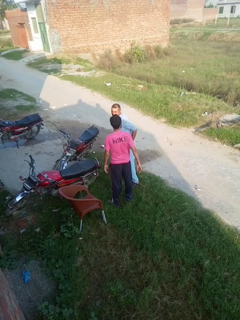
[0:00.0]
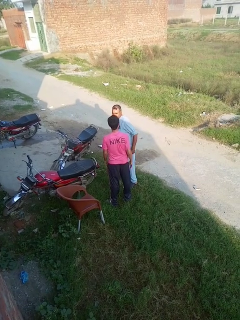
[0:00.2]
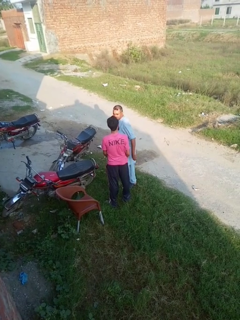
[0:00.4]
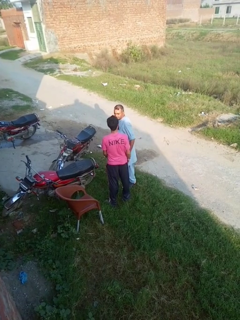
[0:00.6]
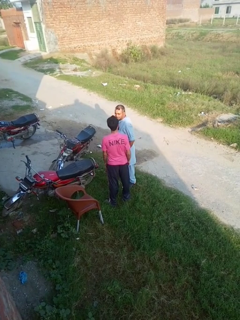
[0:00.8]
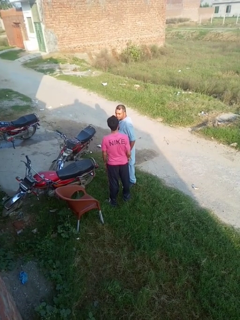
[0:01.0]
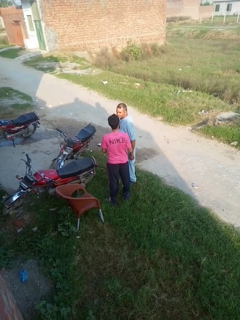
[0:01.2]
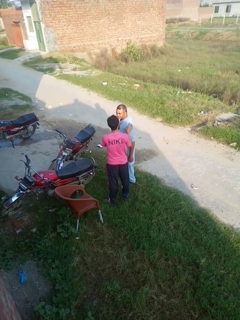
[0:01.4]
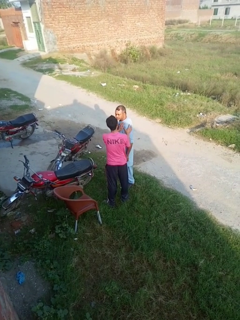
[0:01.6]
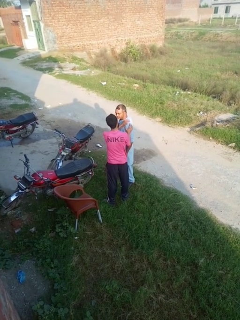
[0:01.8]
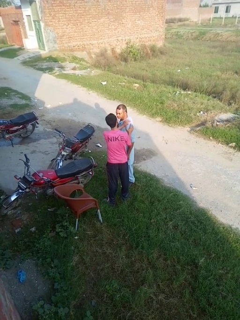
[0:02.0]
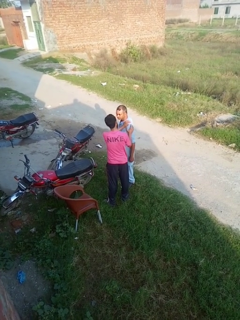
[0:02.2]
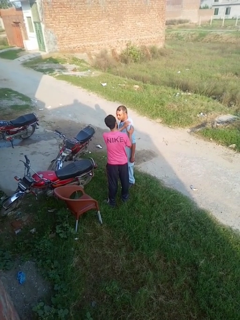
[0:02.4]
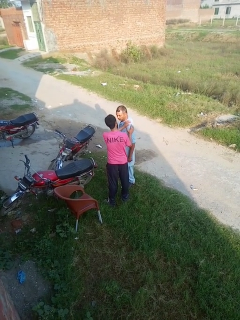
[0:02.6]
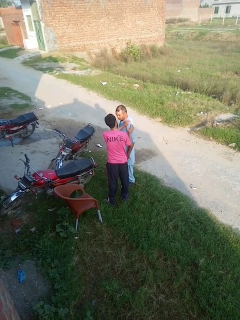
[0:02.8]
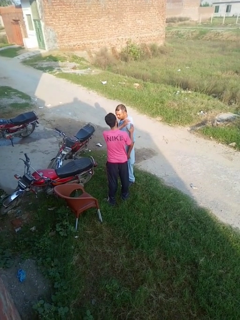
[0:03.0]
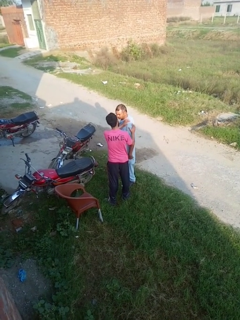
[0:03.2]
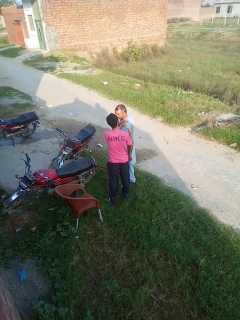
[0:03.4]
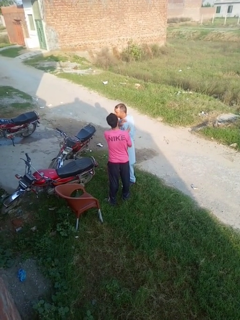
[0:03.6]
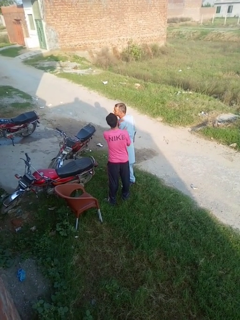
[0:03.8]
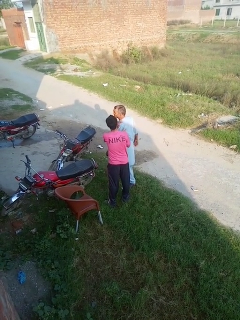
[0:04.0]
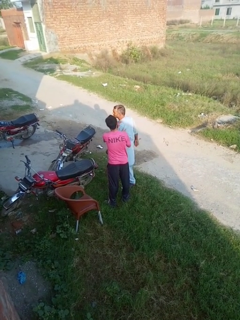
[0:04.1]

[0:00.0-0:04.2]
person grabs person by shoulder

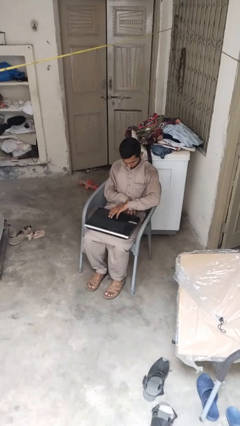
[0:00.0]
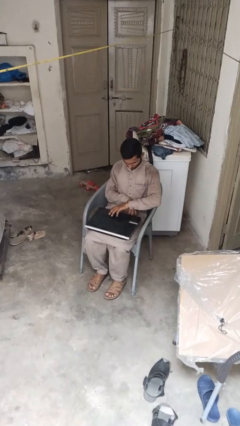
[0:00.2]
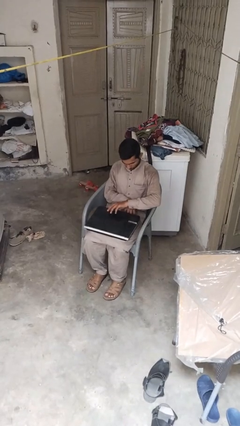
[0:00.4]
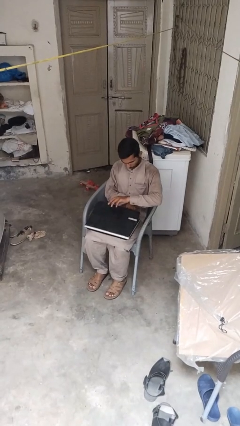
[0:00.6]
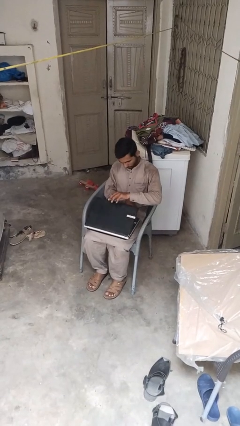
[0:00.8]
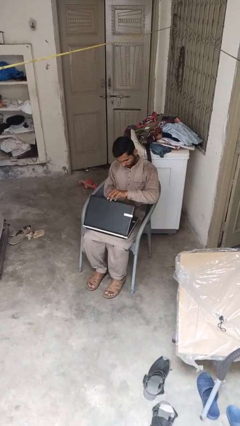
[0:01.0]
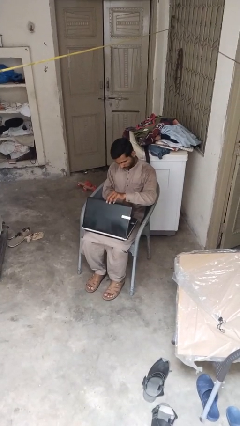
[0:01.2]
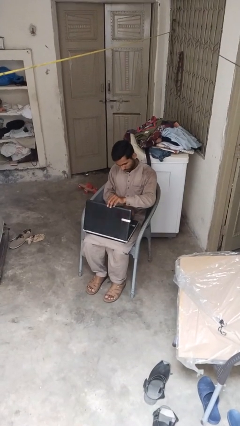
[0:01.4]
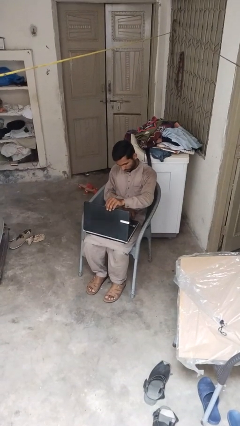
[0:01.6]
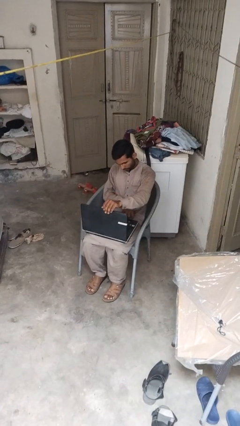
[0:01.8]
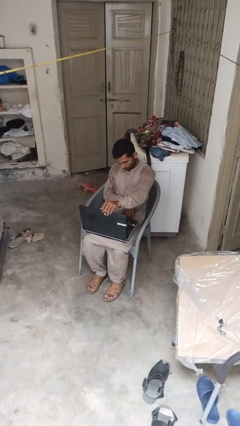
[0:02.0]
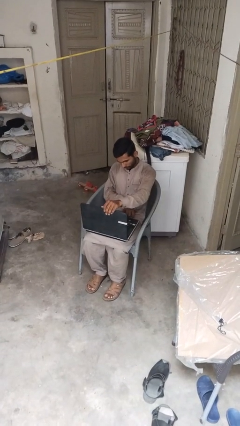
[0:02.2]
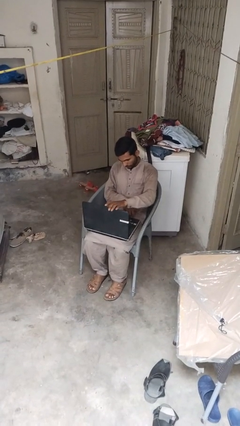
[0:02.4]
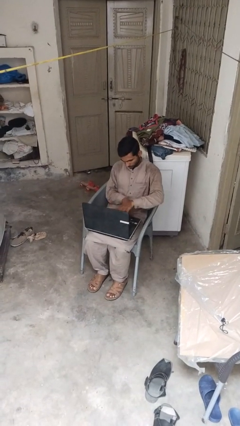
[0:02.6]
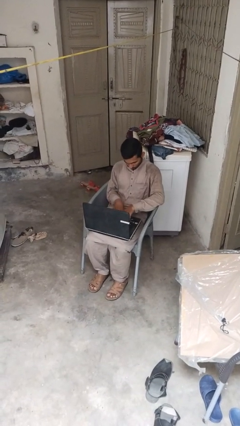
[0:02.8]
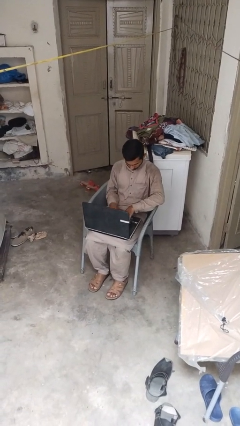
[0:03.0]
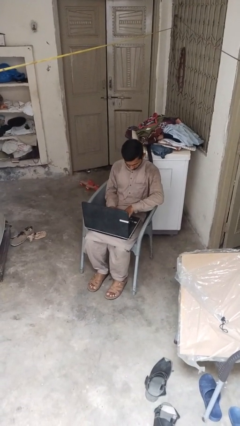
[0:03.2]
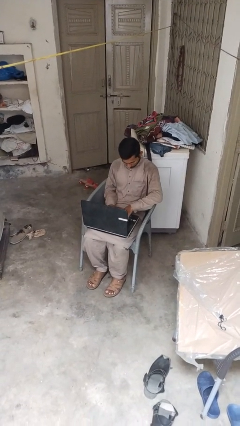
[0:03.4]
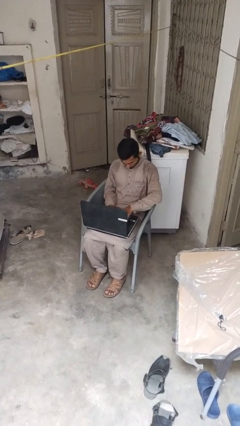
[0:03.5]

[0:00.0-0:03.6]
person opens laptop

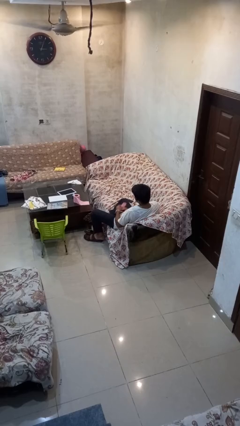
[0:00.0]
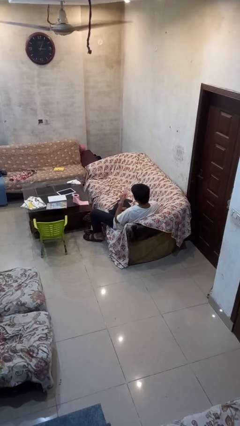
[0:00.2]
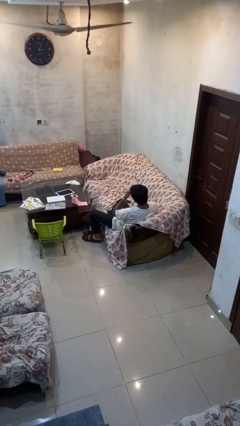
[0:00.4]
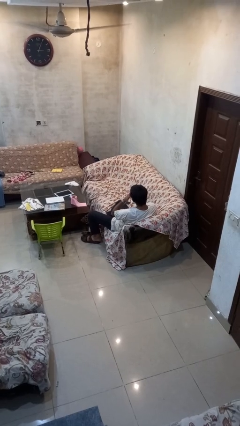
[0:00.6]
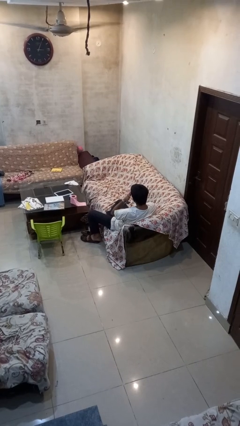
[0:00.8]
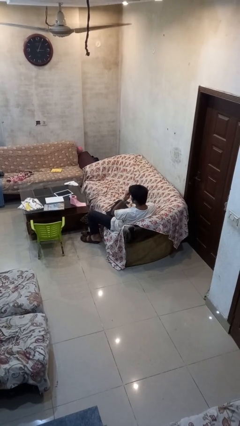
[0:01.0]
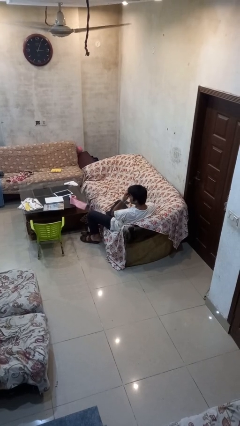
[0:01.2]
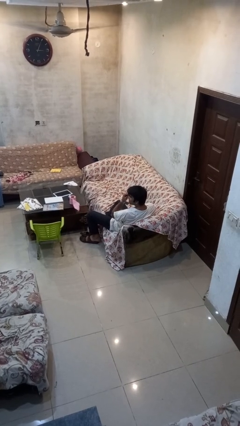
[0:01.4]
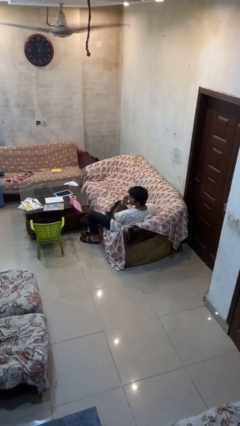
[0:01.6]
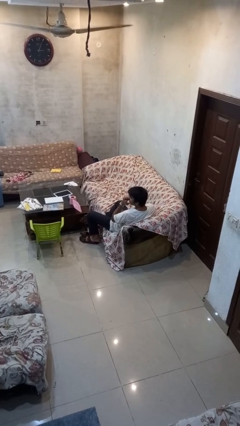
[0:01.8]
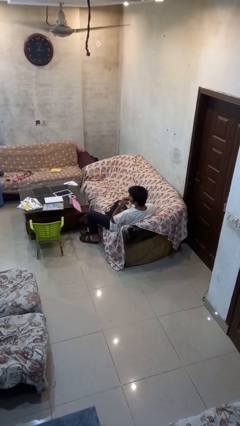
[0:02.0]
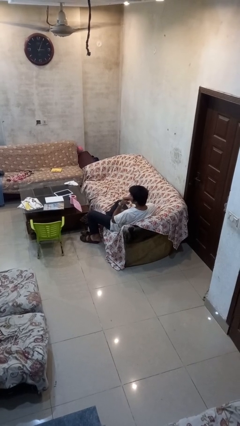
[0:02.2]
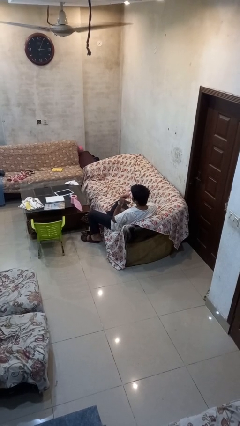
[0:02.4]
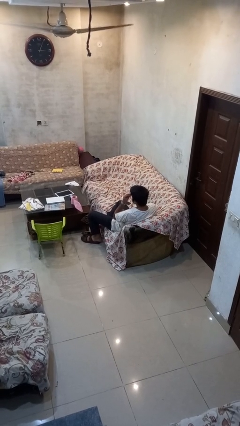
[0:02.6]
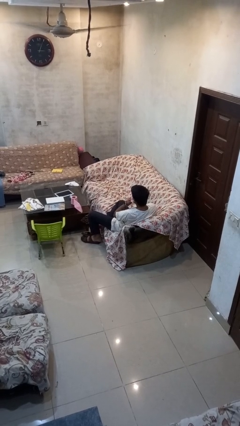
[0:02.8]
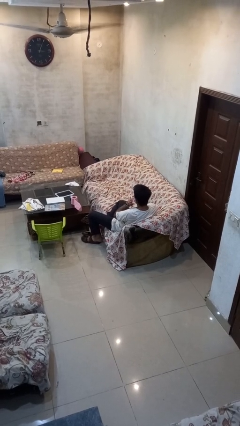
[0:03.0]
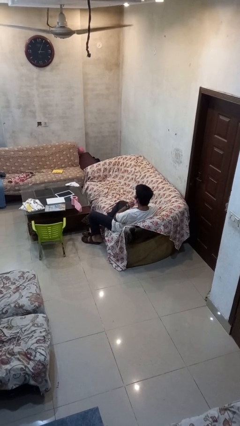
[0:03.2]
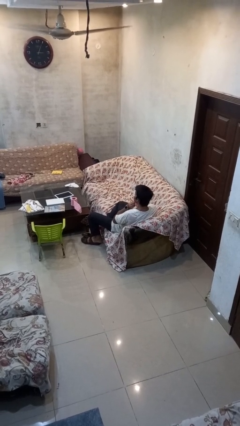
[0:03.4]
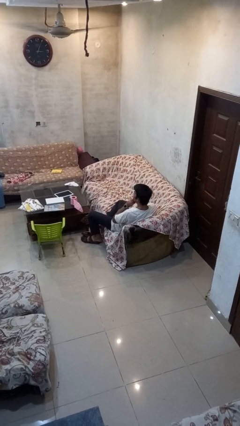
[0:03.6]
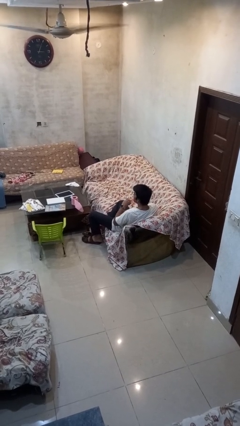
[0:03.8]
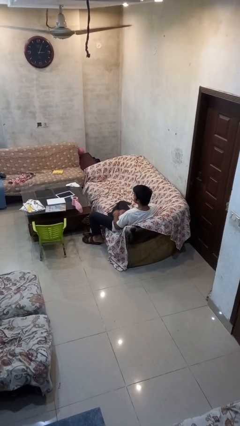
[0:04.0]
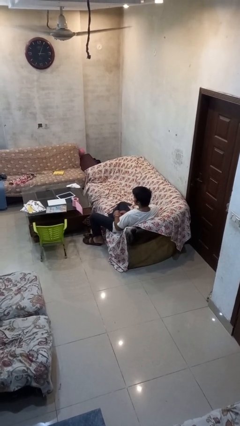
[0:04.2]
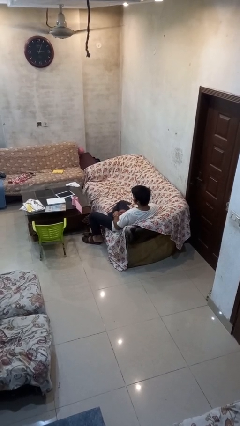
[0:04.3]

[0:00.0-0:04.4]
person wipes mouth with napkin

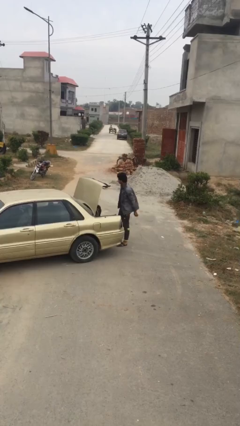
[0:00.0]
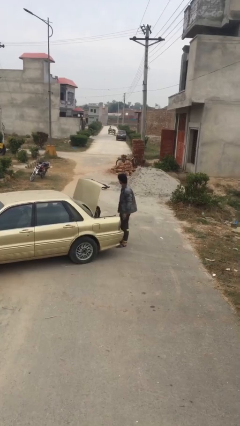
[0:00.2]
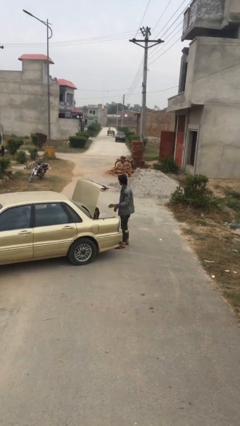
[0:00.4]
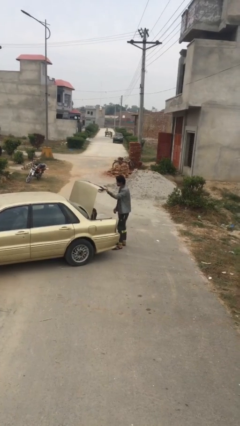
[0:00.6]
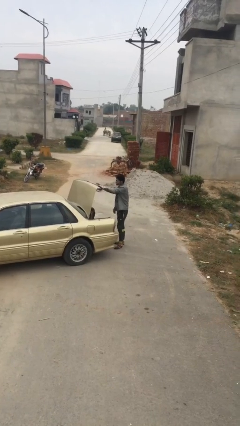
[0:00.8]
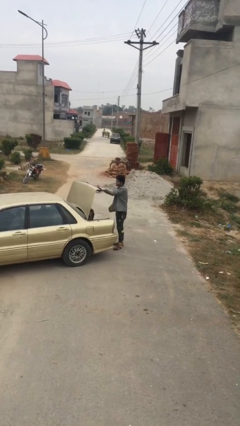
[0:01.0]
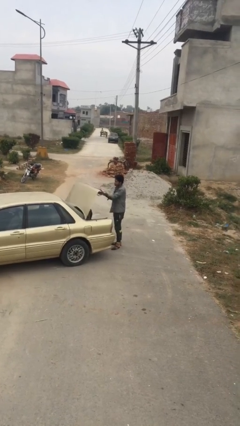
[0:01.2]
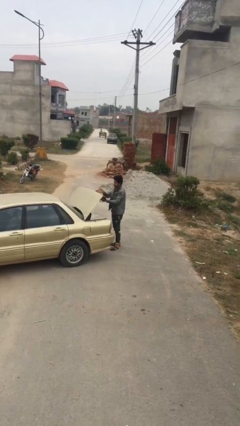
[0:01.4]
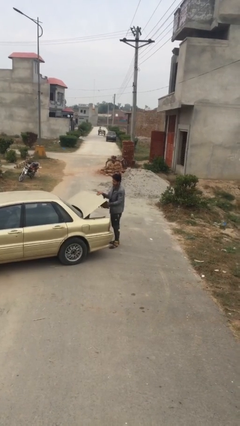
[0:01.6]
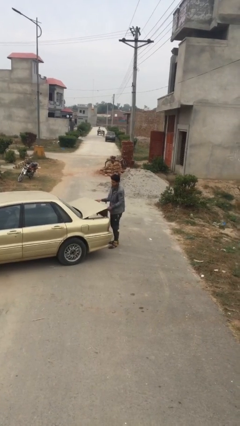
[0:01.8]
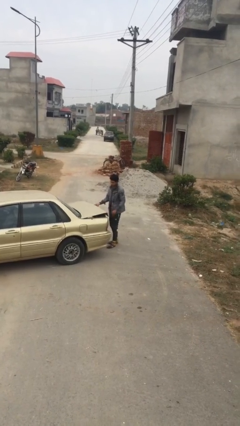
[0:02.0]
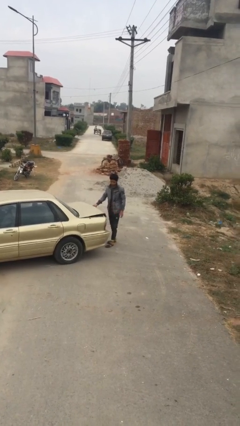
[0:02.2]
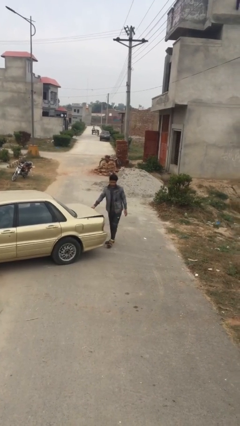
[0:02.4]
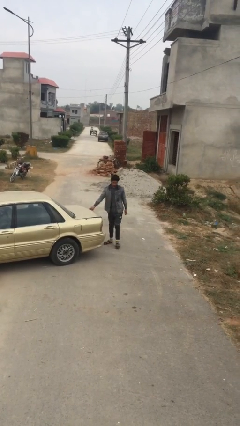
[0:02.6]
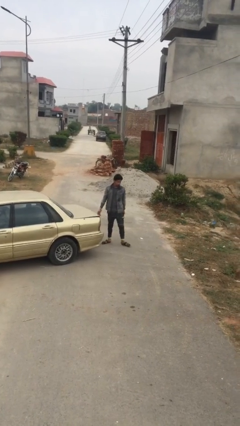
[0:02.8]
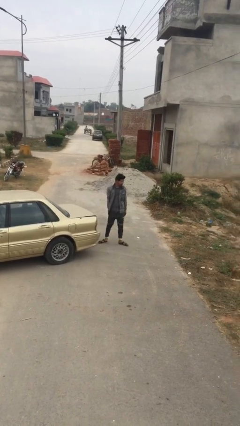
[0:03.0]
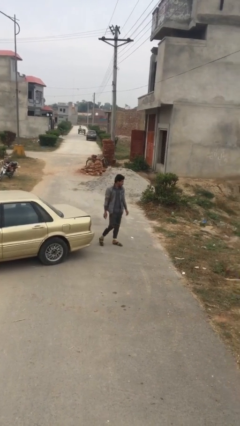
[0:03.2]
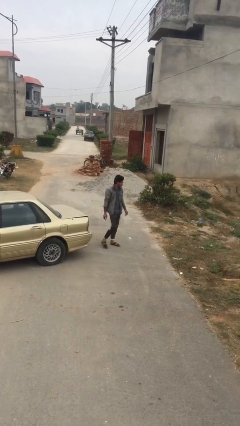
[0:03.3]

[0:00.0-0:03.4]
person closes car trunk

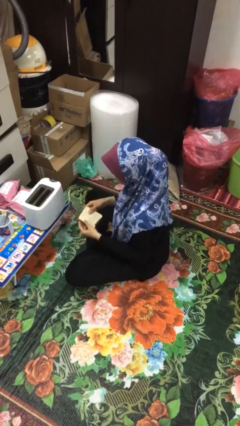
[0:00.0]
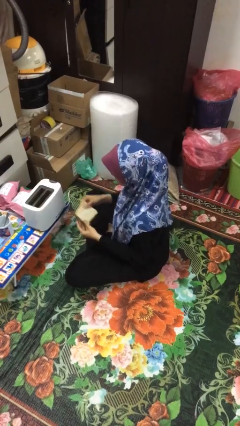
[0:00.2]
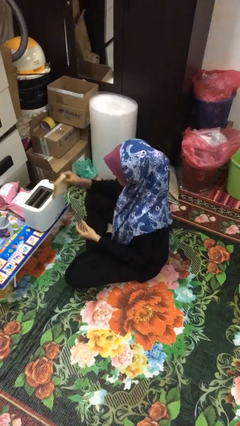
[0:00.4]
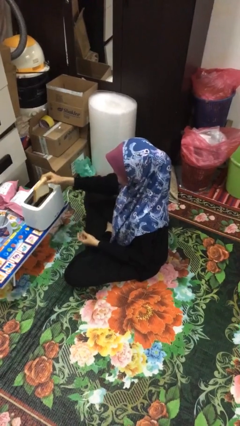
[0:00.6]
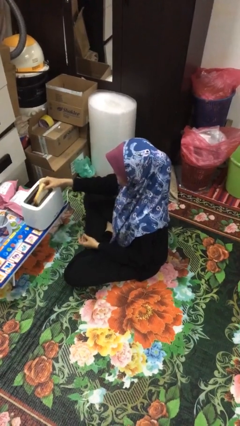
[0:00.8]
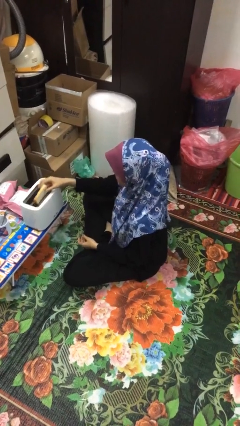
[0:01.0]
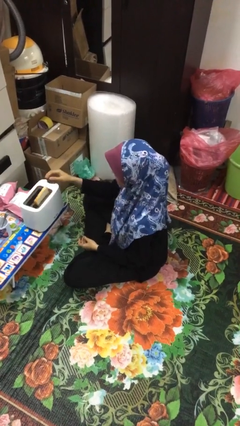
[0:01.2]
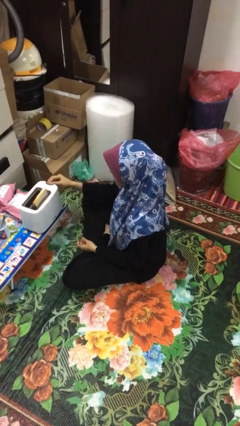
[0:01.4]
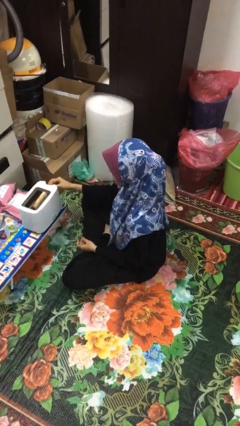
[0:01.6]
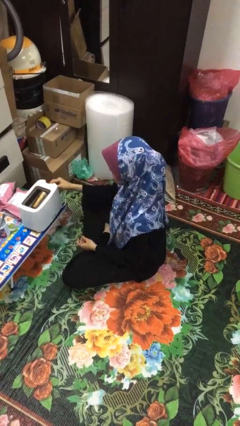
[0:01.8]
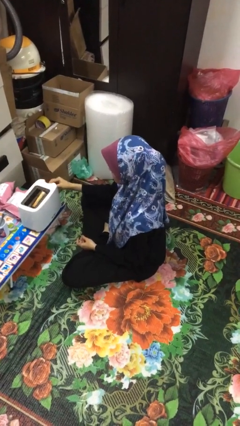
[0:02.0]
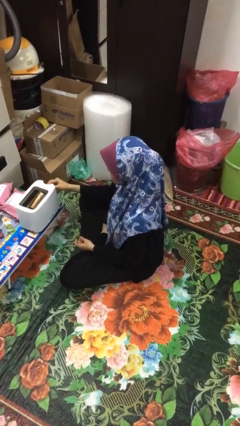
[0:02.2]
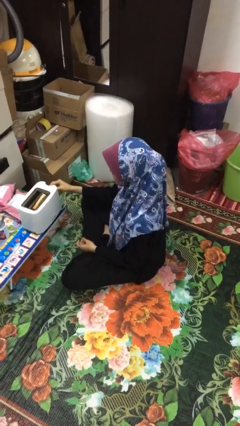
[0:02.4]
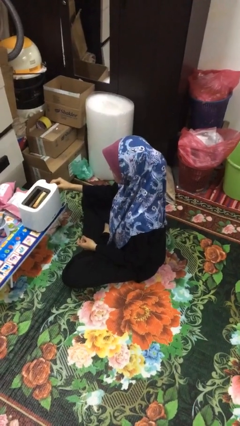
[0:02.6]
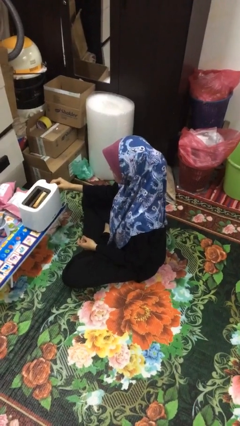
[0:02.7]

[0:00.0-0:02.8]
person puts object into toaster
